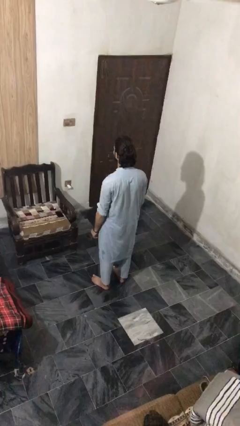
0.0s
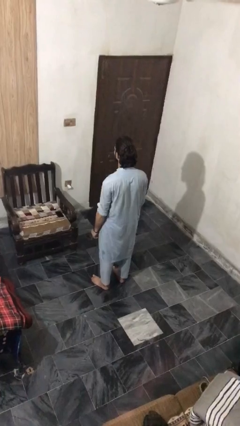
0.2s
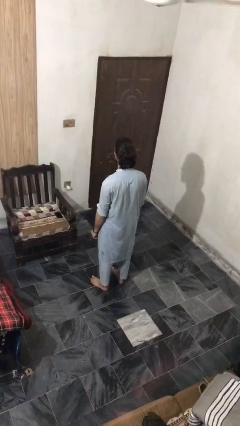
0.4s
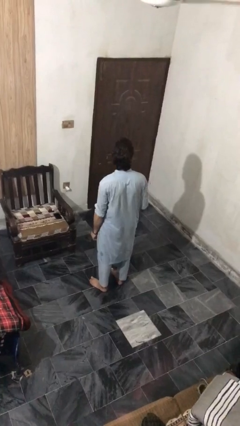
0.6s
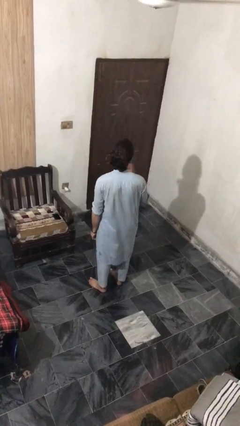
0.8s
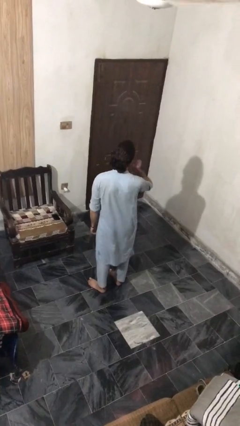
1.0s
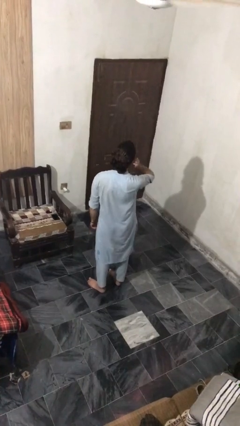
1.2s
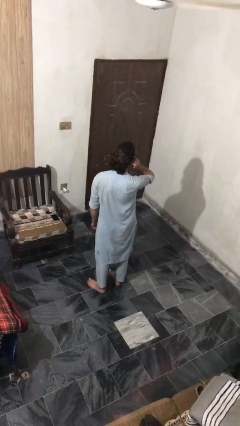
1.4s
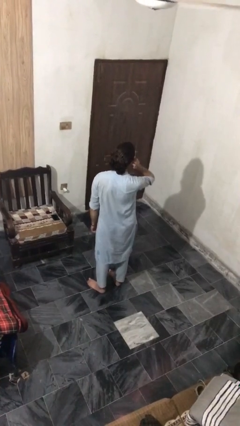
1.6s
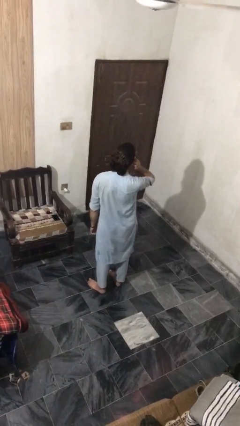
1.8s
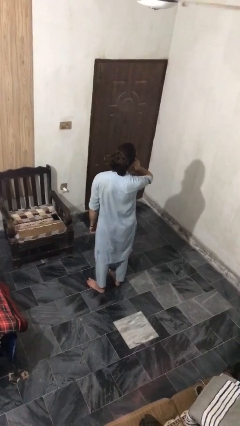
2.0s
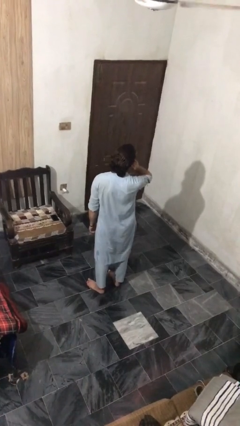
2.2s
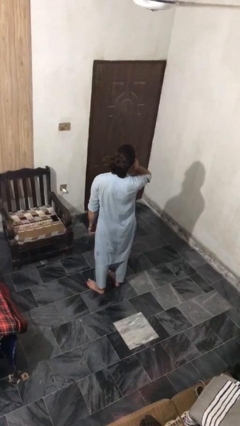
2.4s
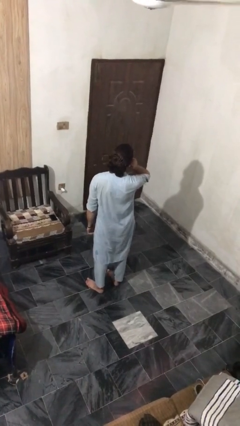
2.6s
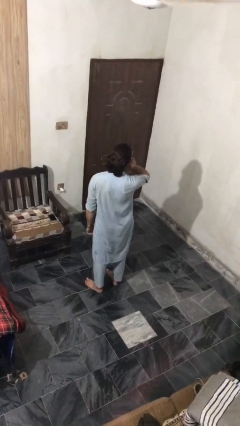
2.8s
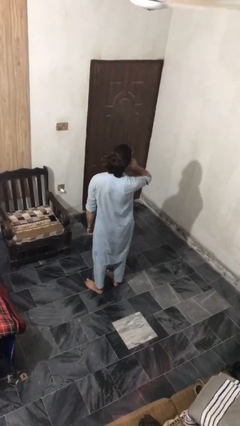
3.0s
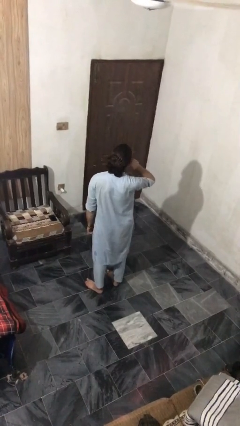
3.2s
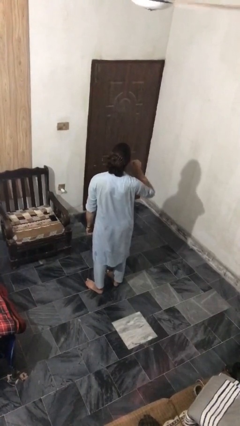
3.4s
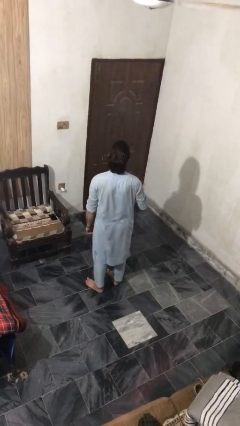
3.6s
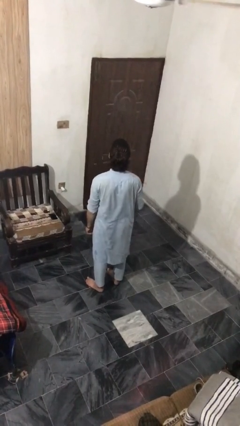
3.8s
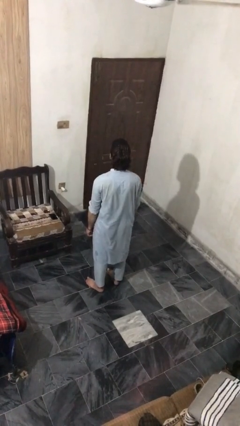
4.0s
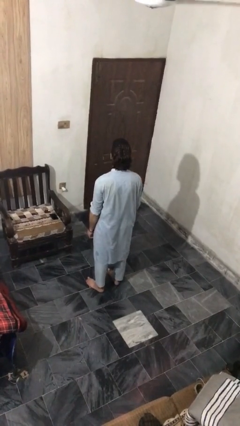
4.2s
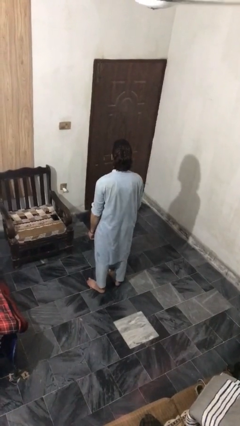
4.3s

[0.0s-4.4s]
person touches earlobe

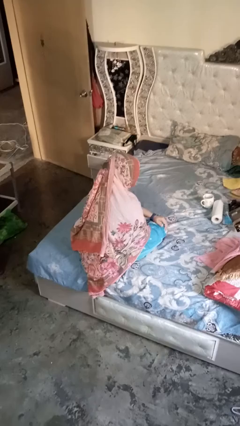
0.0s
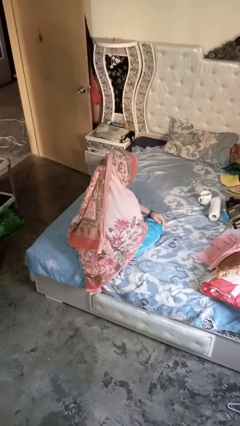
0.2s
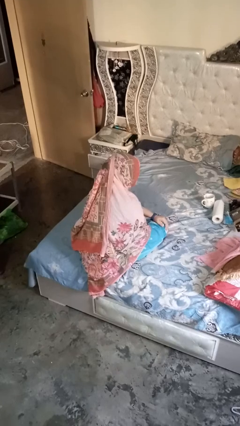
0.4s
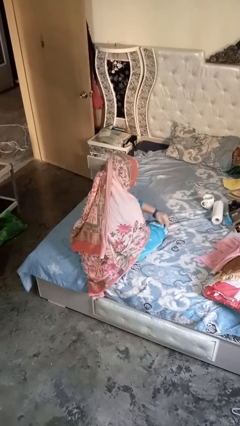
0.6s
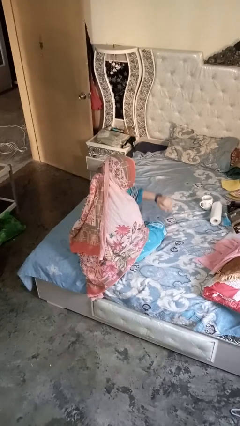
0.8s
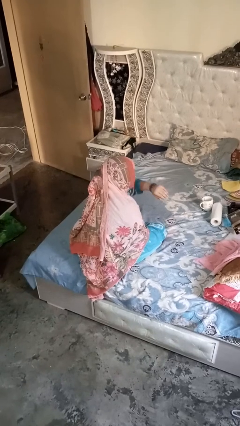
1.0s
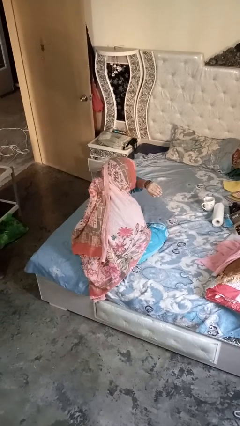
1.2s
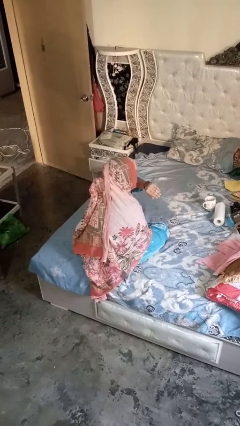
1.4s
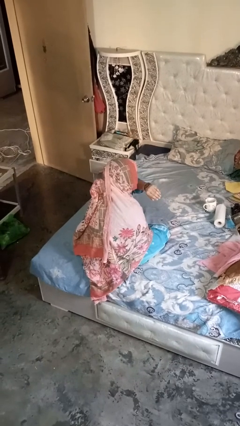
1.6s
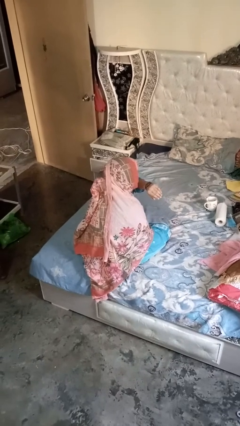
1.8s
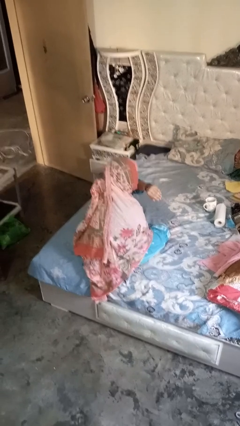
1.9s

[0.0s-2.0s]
person gestures watch closely

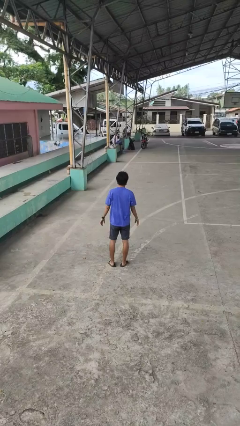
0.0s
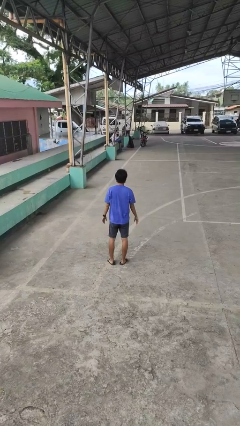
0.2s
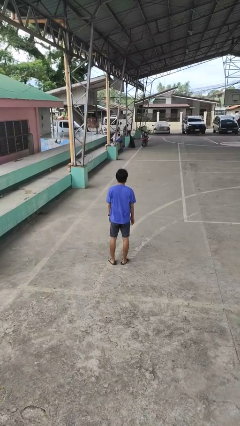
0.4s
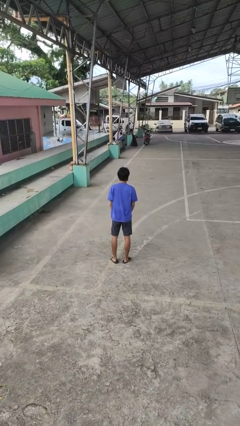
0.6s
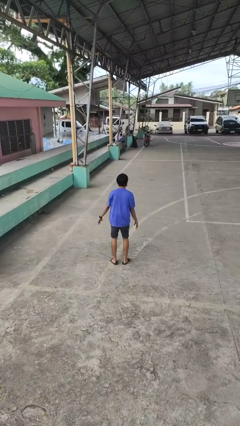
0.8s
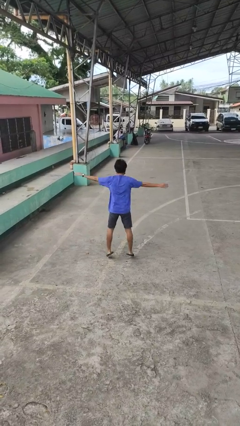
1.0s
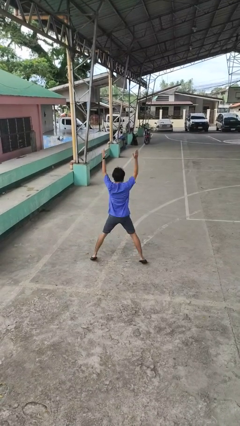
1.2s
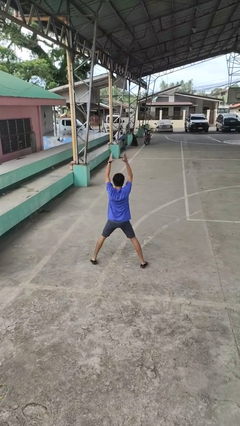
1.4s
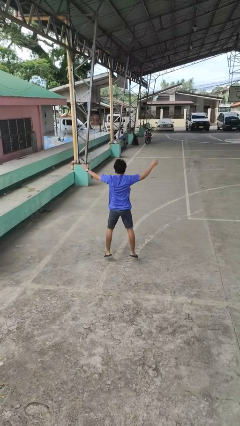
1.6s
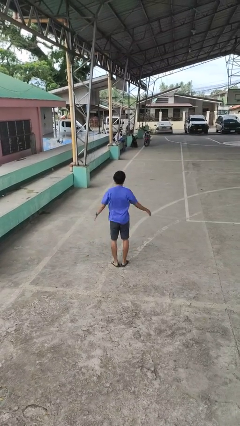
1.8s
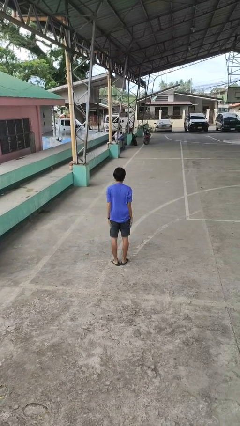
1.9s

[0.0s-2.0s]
person exercises with jumping jacks

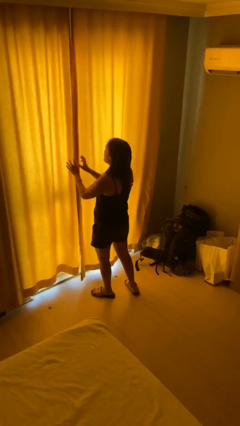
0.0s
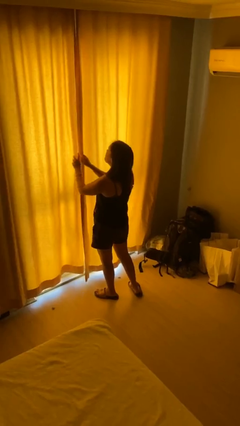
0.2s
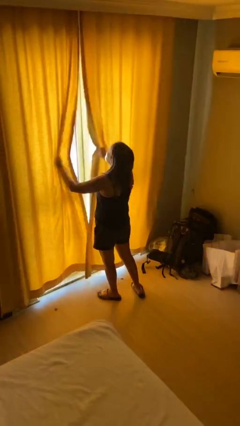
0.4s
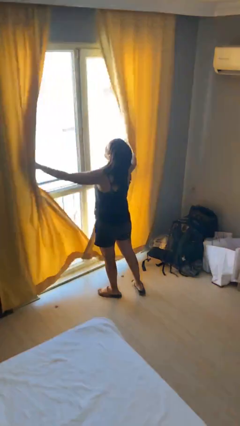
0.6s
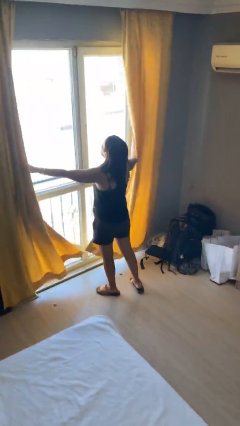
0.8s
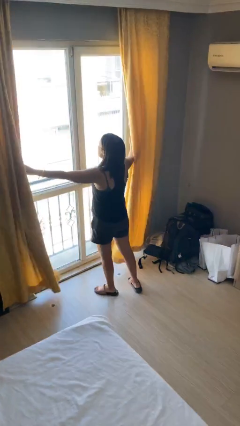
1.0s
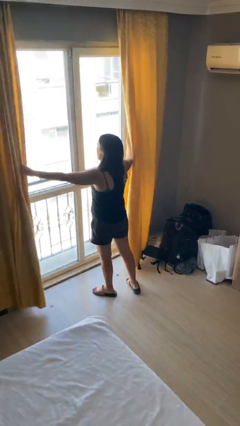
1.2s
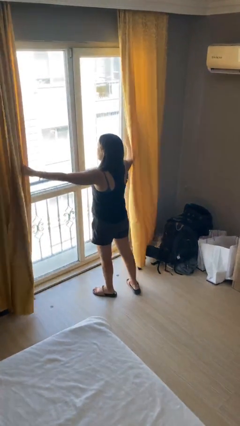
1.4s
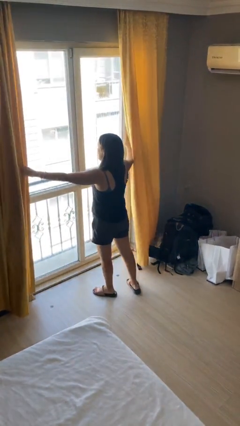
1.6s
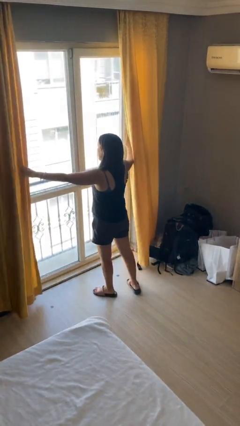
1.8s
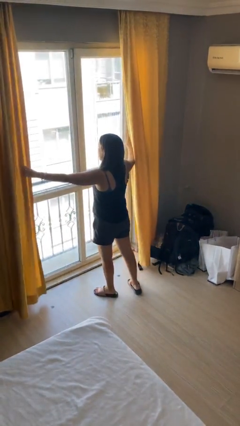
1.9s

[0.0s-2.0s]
person opens curtains

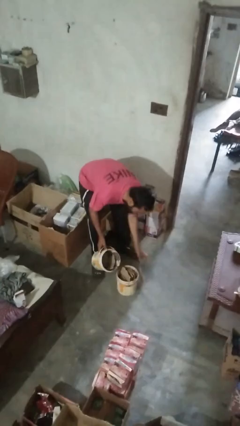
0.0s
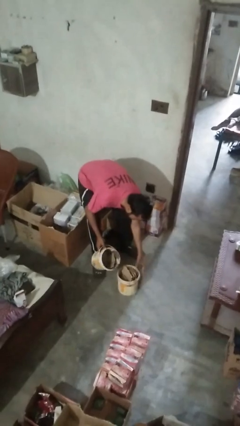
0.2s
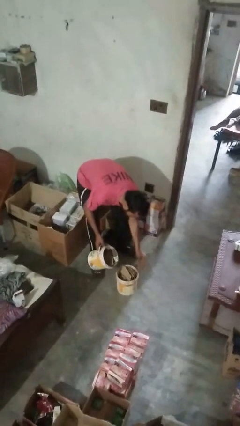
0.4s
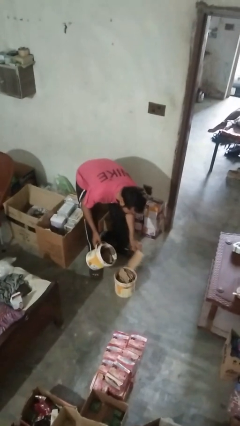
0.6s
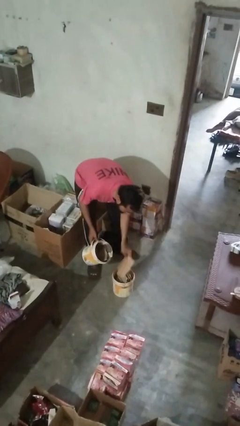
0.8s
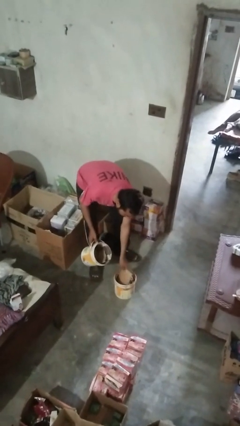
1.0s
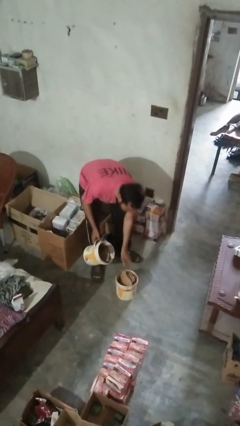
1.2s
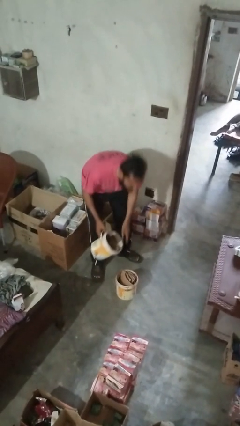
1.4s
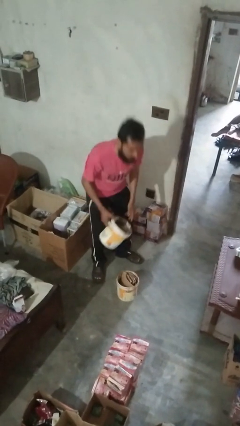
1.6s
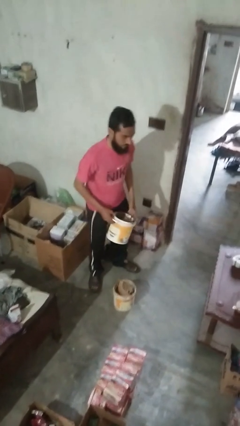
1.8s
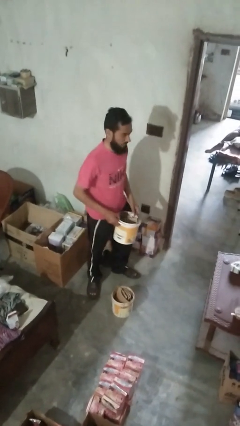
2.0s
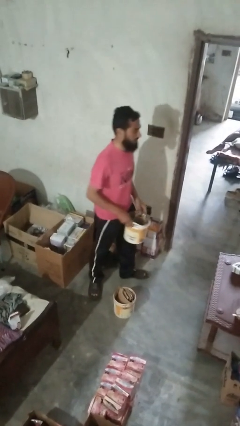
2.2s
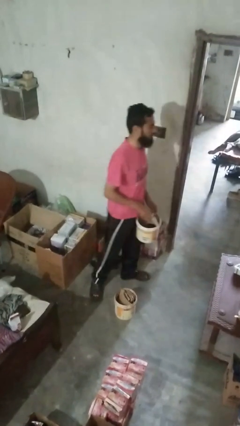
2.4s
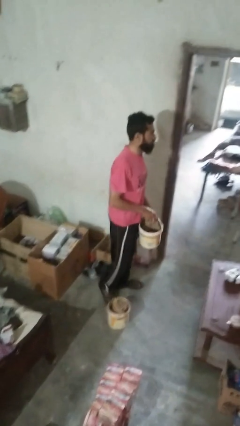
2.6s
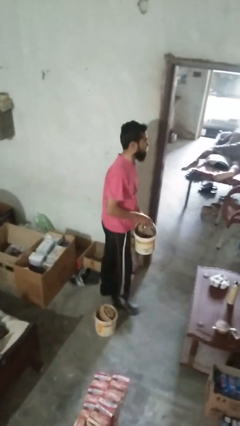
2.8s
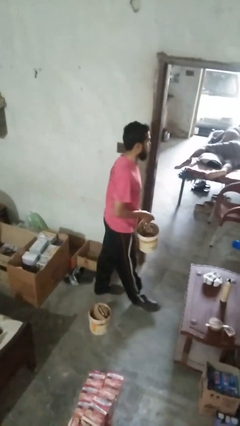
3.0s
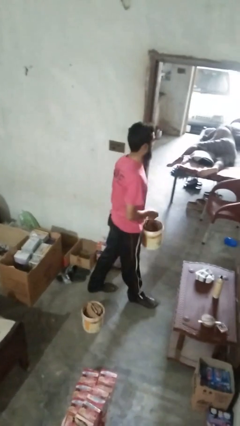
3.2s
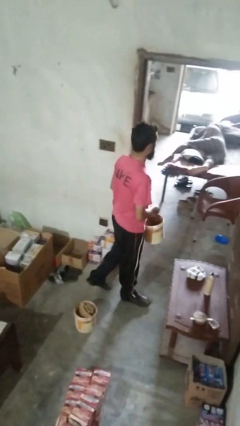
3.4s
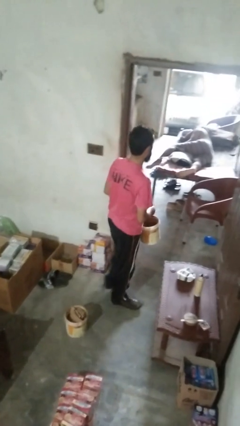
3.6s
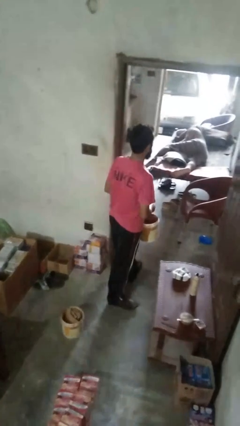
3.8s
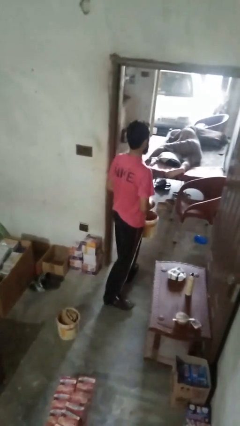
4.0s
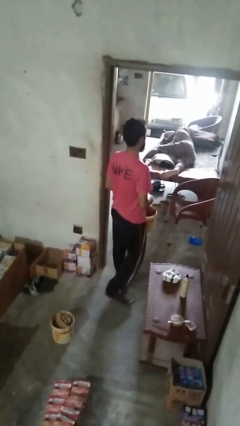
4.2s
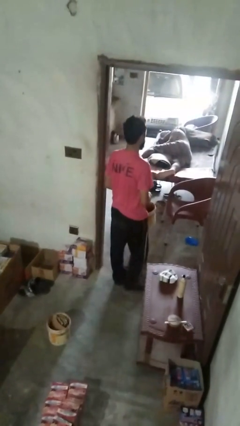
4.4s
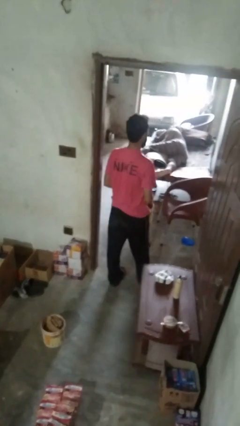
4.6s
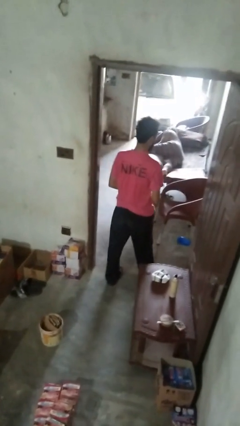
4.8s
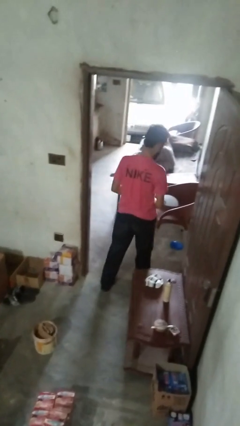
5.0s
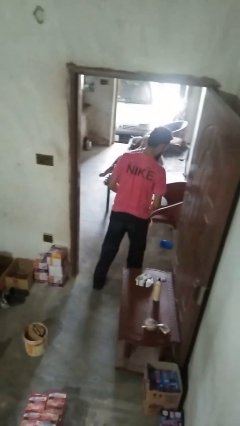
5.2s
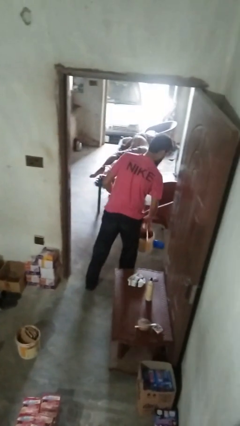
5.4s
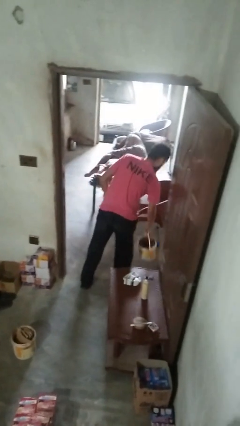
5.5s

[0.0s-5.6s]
person inserts trashbag into trashcan

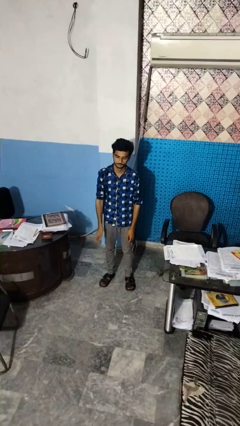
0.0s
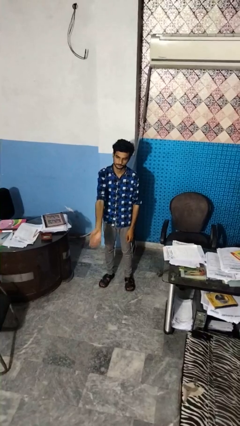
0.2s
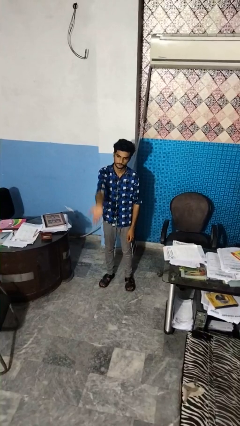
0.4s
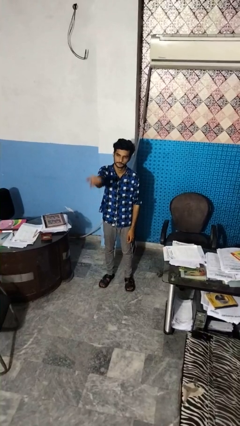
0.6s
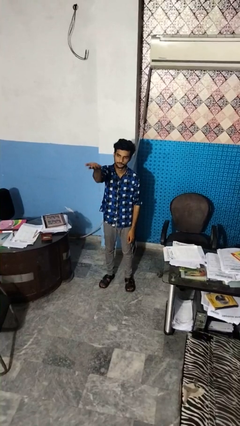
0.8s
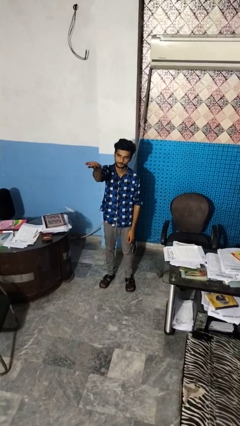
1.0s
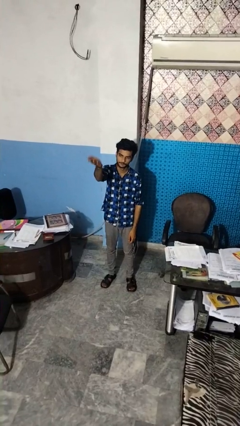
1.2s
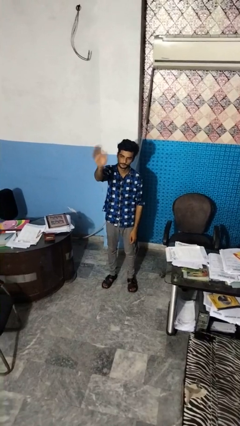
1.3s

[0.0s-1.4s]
person gestures swipe up

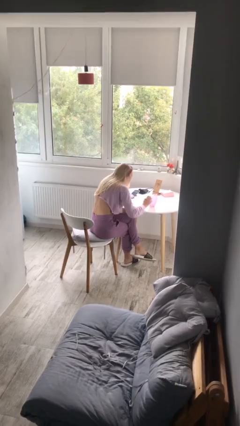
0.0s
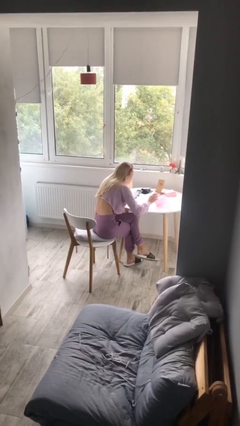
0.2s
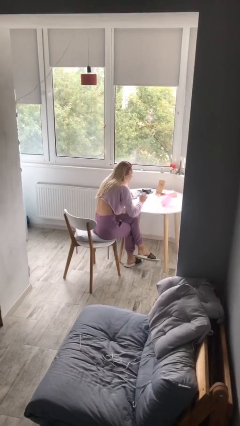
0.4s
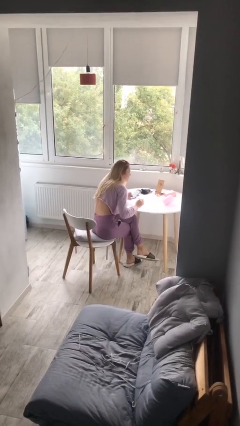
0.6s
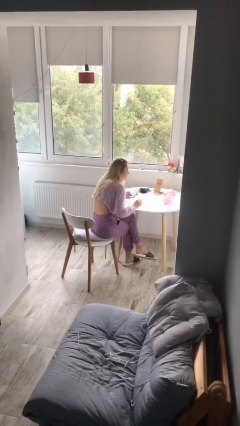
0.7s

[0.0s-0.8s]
person knocks over glass
